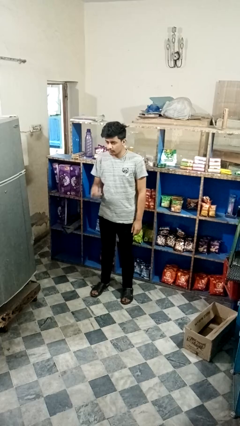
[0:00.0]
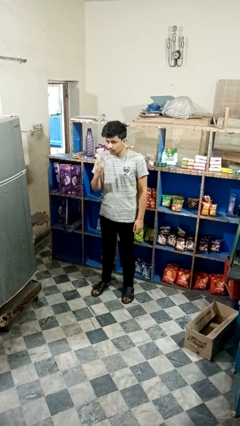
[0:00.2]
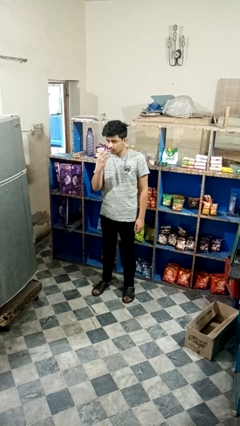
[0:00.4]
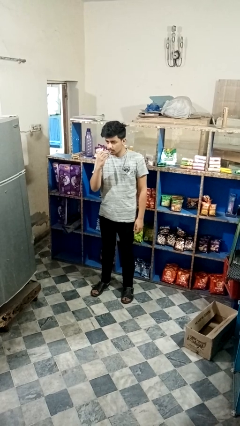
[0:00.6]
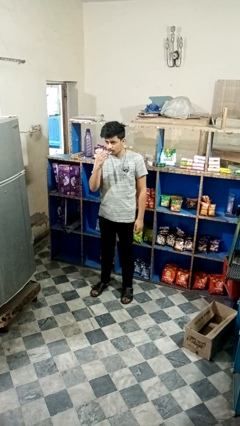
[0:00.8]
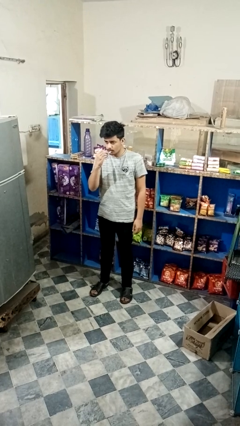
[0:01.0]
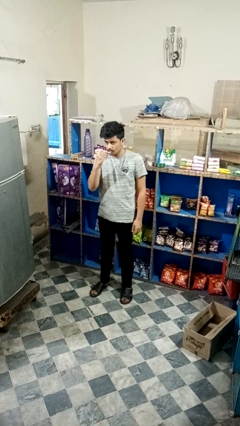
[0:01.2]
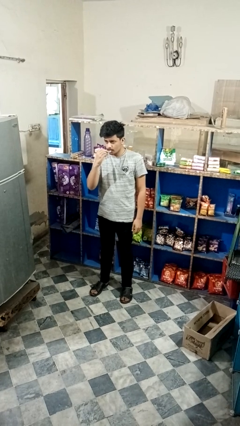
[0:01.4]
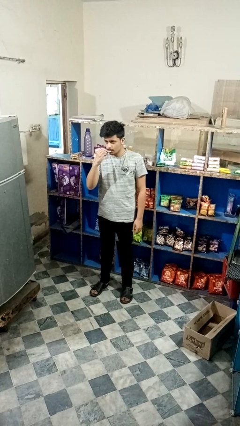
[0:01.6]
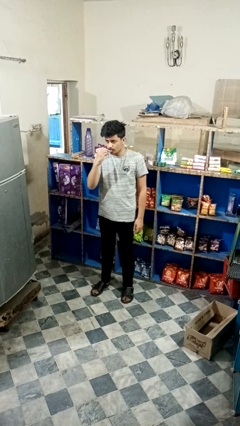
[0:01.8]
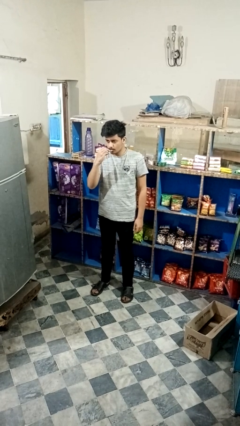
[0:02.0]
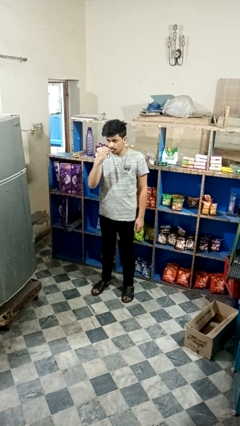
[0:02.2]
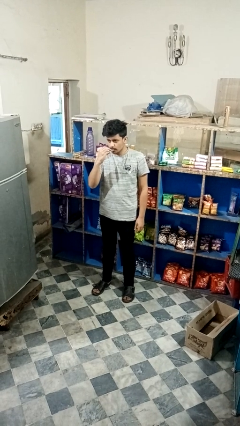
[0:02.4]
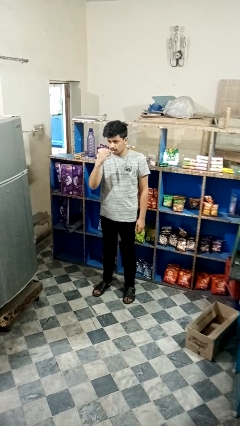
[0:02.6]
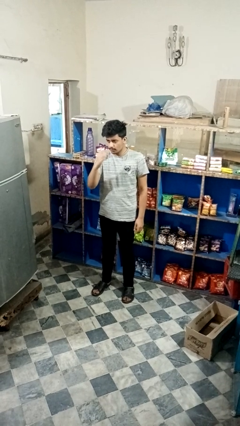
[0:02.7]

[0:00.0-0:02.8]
person vapes

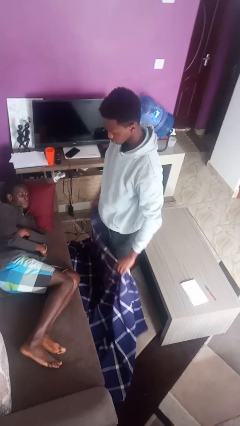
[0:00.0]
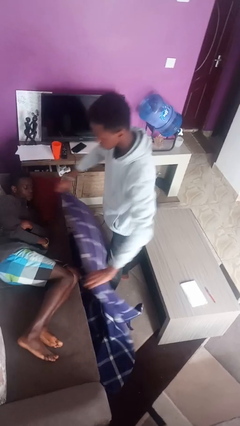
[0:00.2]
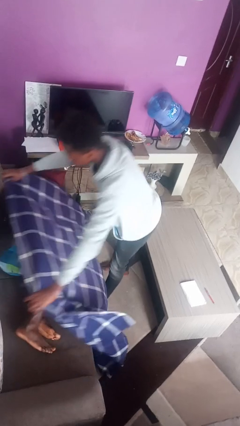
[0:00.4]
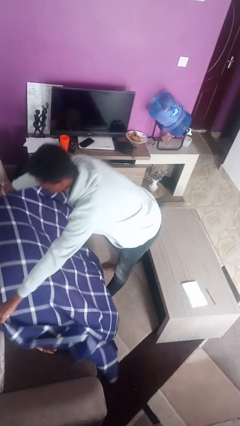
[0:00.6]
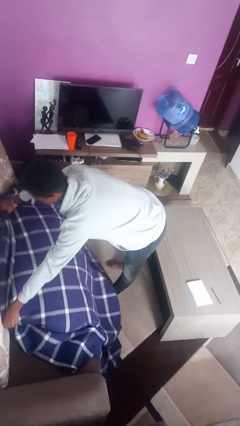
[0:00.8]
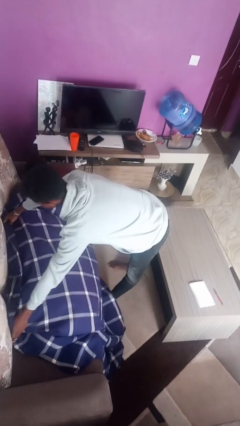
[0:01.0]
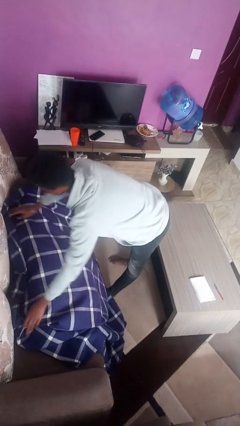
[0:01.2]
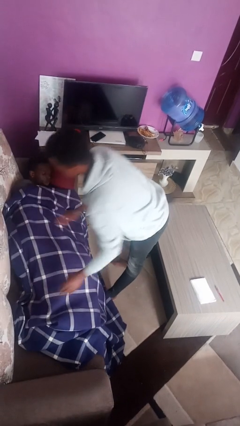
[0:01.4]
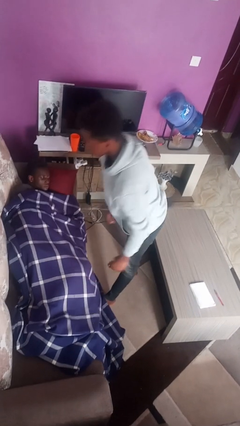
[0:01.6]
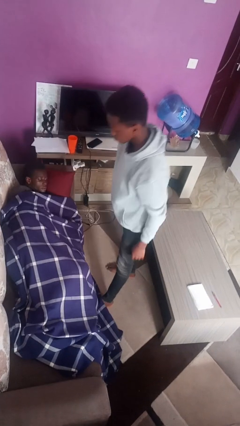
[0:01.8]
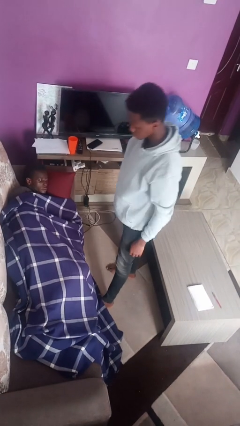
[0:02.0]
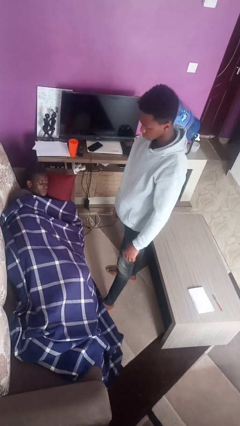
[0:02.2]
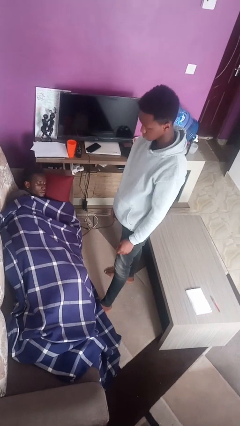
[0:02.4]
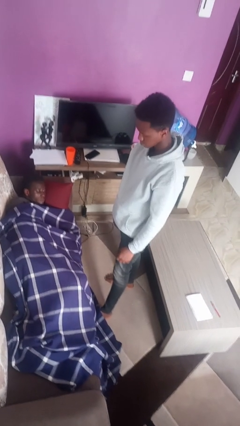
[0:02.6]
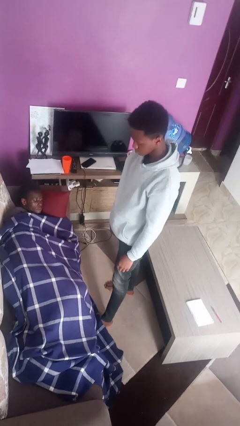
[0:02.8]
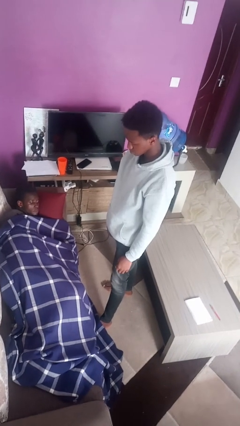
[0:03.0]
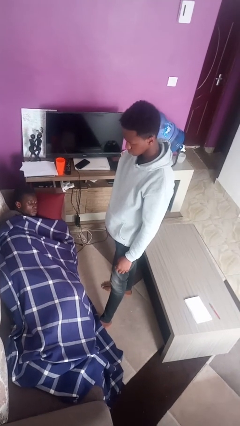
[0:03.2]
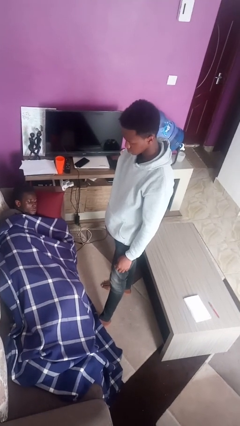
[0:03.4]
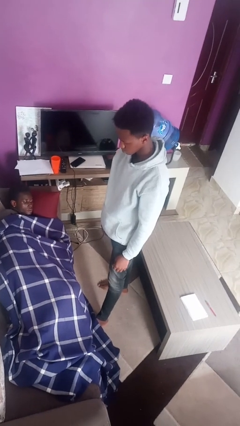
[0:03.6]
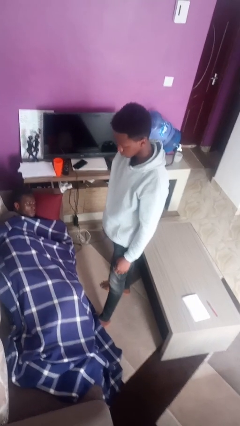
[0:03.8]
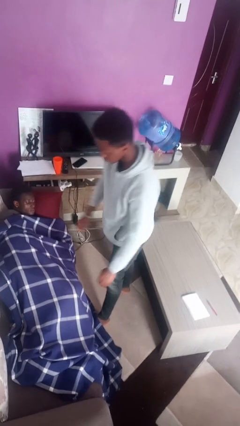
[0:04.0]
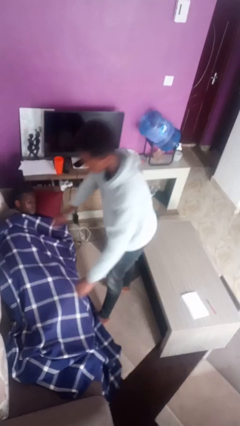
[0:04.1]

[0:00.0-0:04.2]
person covers friend with blanket

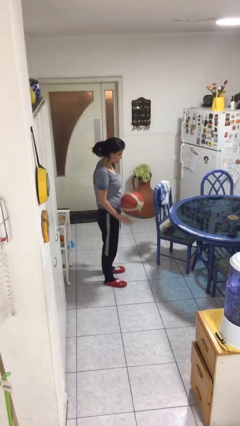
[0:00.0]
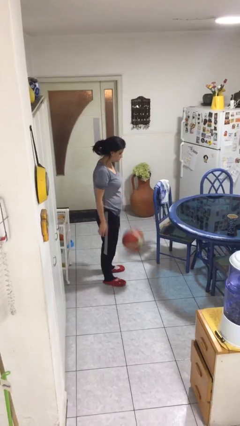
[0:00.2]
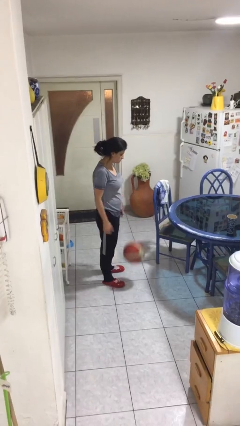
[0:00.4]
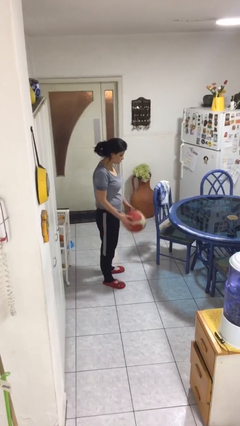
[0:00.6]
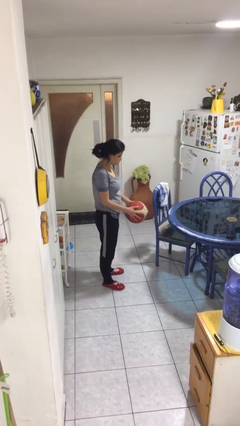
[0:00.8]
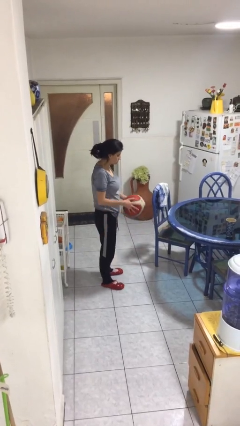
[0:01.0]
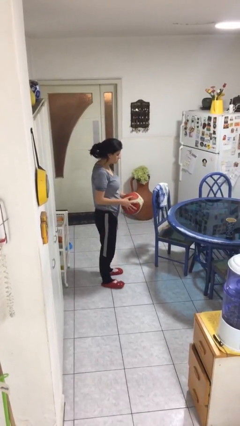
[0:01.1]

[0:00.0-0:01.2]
person bounces ball on floor

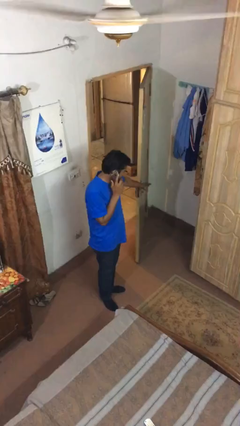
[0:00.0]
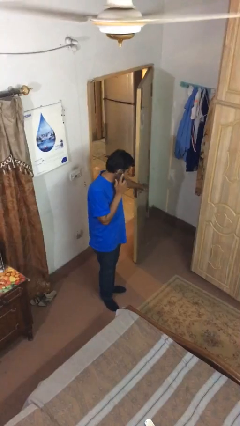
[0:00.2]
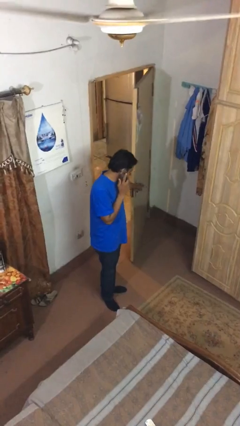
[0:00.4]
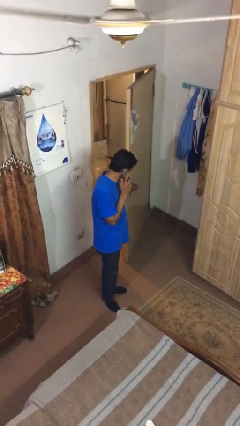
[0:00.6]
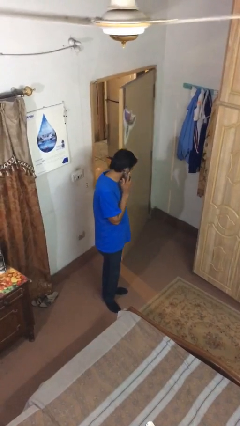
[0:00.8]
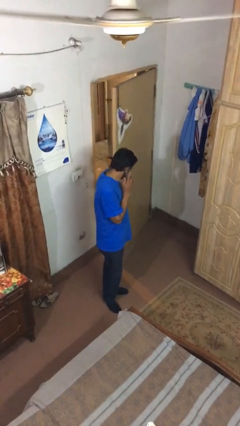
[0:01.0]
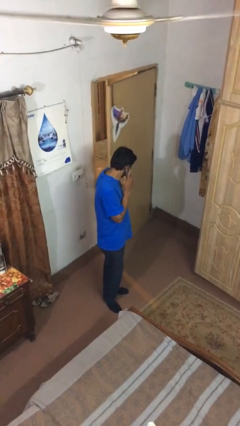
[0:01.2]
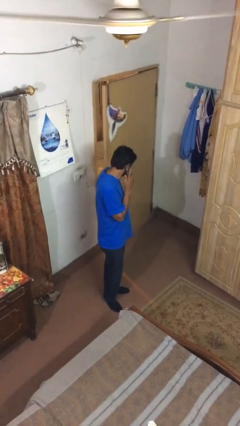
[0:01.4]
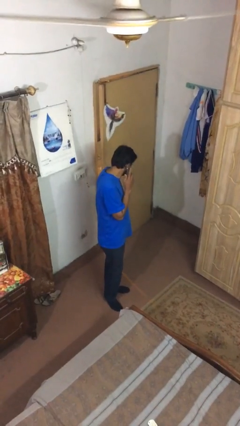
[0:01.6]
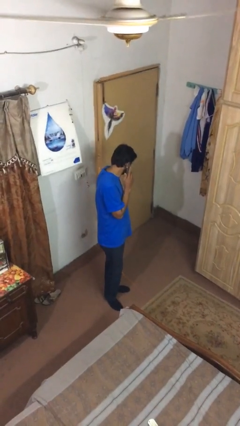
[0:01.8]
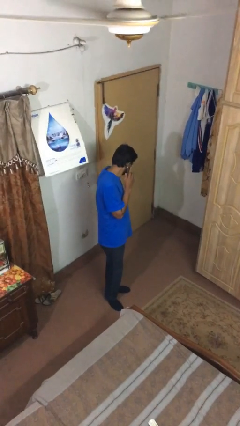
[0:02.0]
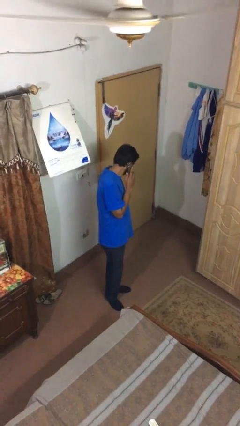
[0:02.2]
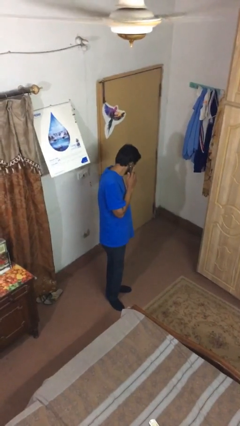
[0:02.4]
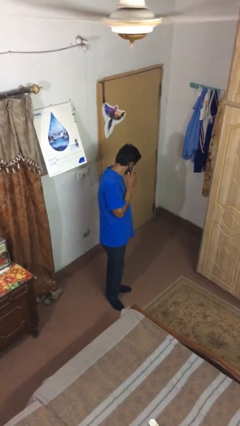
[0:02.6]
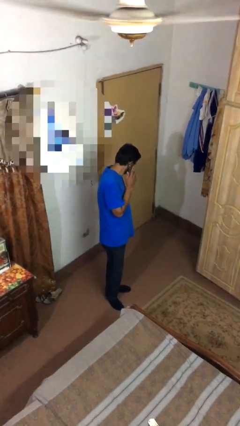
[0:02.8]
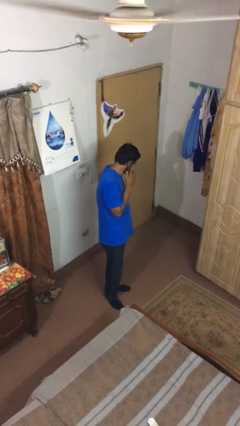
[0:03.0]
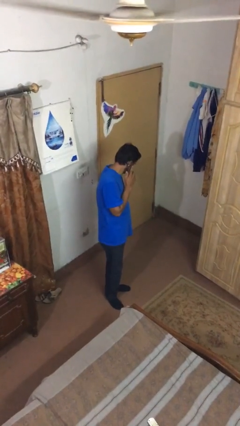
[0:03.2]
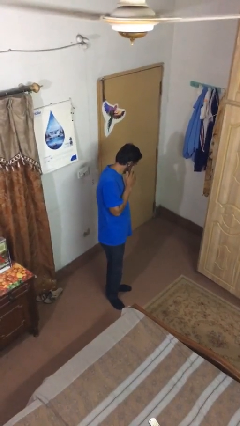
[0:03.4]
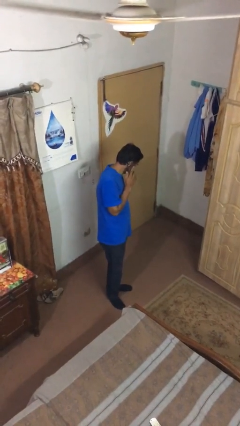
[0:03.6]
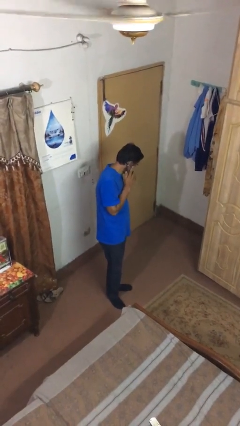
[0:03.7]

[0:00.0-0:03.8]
person closes facility door

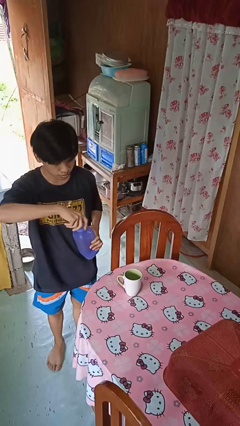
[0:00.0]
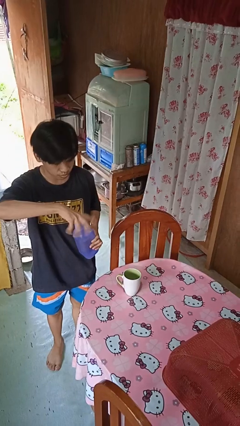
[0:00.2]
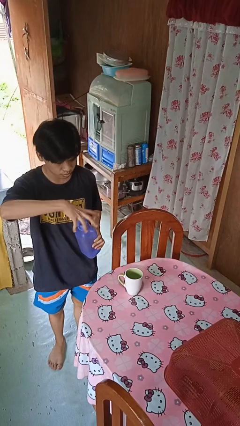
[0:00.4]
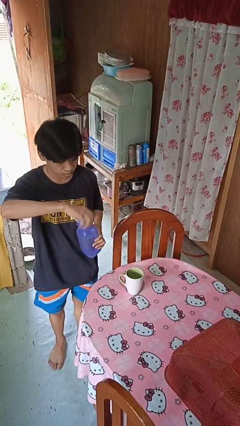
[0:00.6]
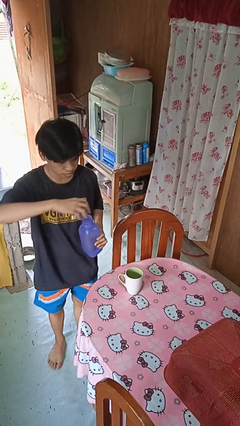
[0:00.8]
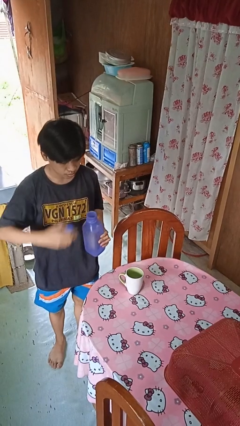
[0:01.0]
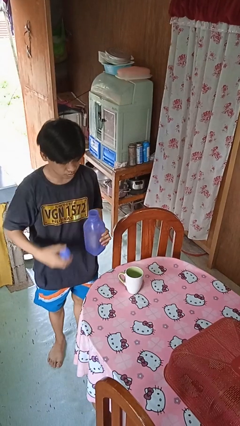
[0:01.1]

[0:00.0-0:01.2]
person unscrews lid from bottle

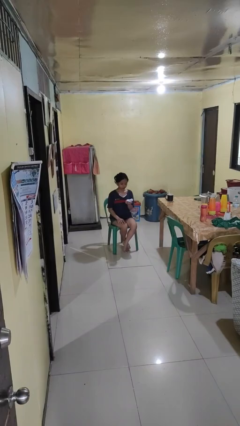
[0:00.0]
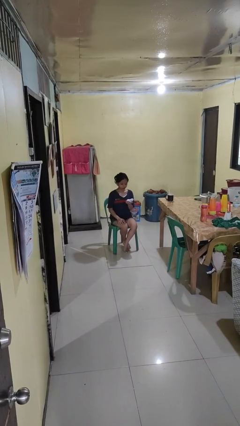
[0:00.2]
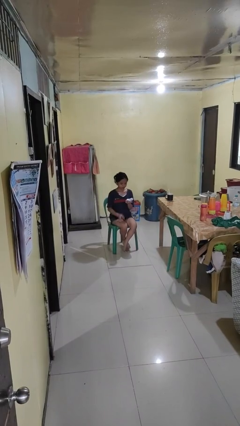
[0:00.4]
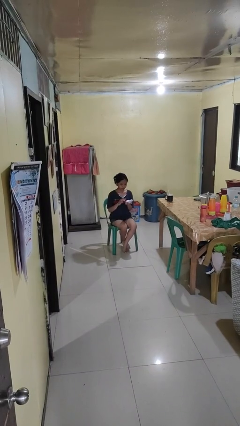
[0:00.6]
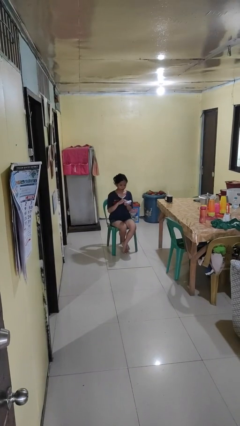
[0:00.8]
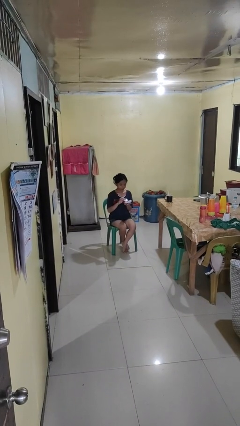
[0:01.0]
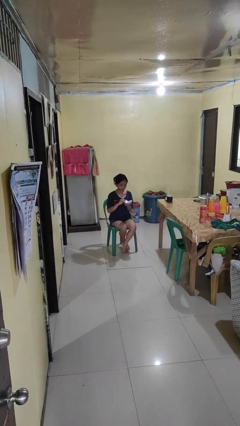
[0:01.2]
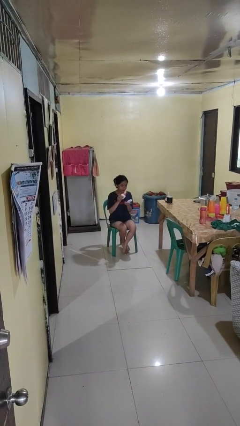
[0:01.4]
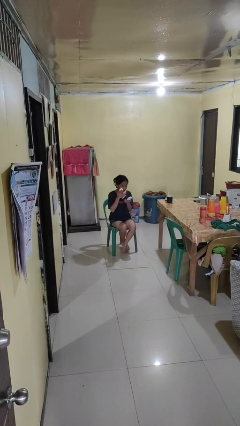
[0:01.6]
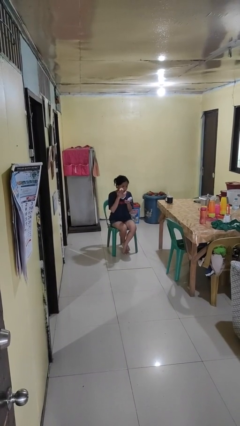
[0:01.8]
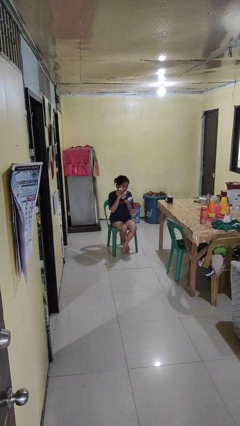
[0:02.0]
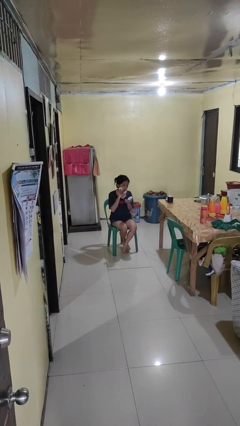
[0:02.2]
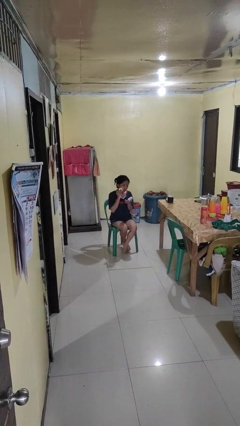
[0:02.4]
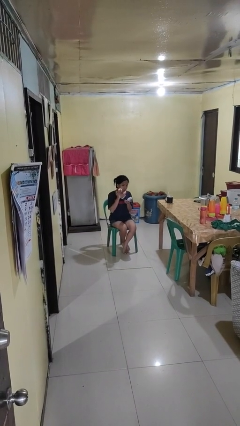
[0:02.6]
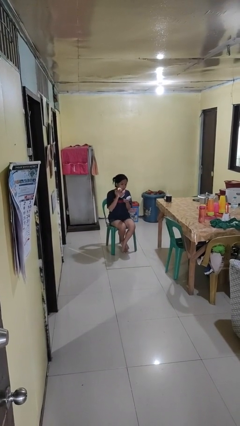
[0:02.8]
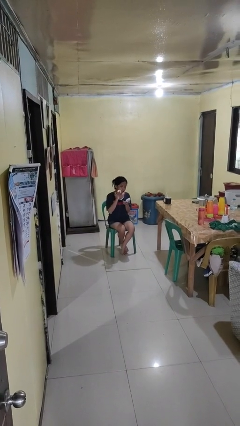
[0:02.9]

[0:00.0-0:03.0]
person applies foundation makeup

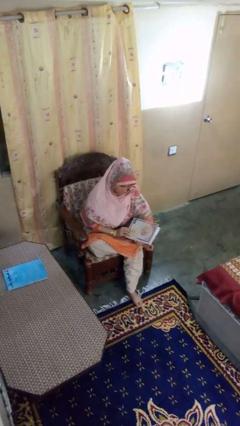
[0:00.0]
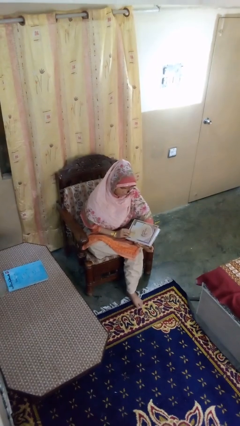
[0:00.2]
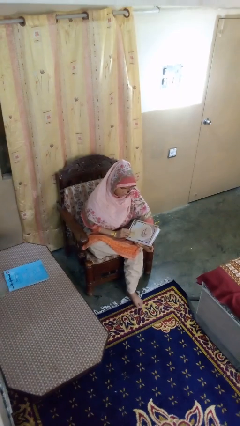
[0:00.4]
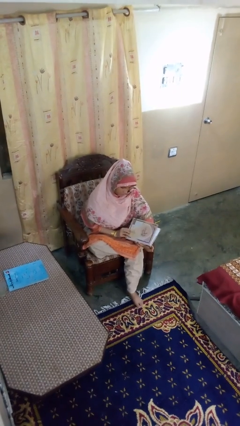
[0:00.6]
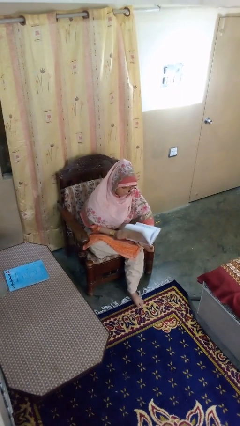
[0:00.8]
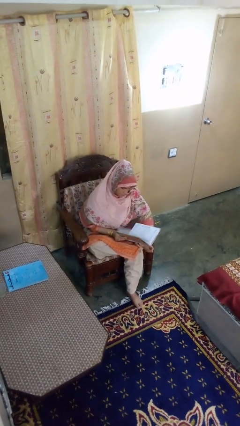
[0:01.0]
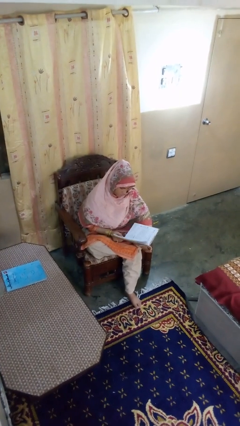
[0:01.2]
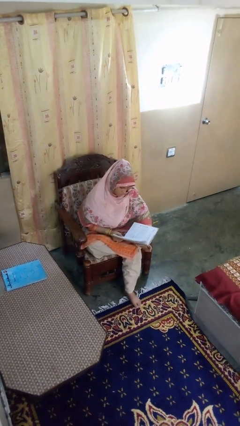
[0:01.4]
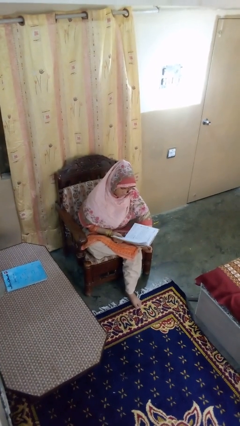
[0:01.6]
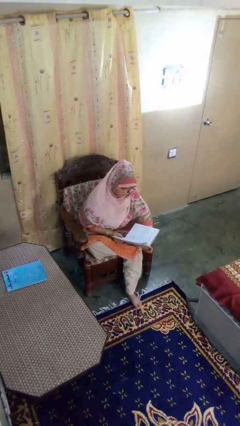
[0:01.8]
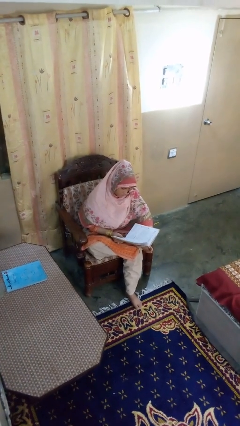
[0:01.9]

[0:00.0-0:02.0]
person reads book
